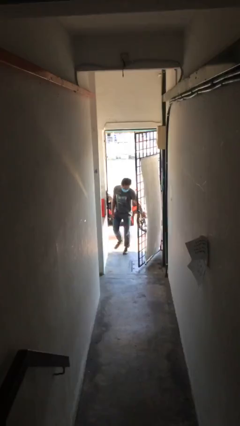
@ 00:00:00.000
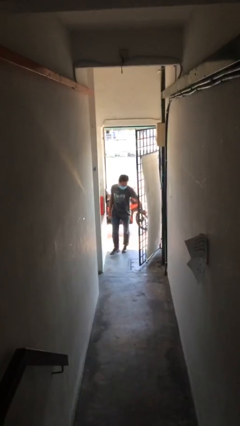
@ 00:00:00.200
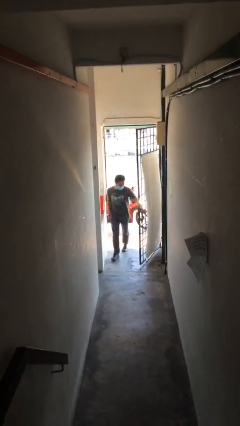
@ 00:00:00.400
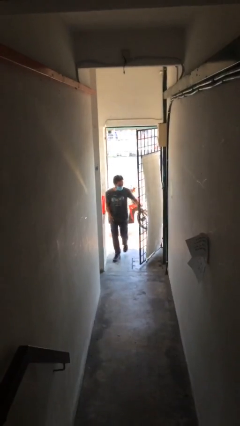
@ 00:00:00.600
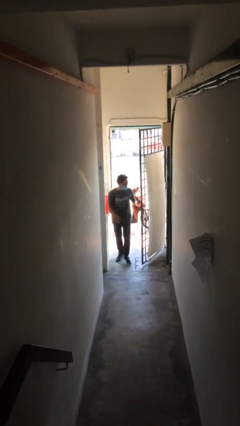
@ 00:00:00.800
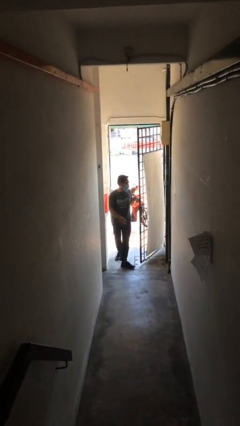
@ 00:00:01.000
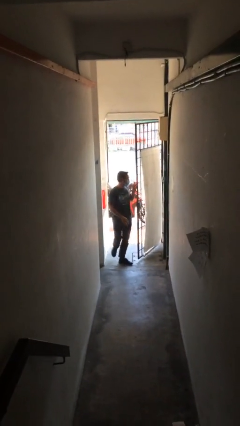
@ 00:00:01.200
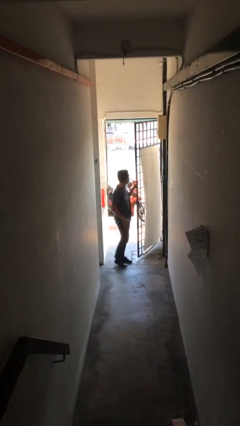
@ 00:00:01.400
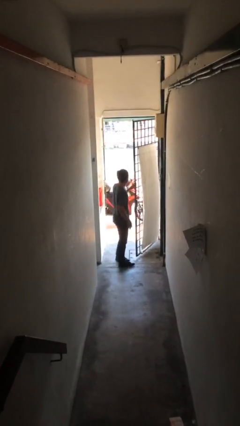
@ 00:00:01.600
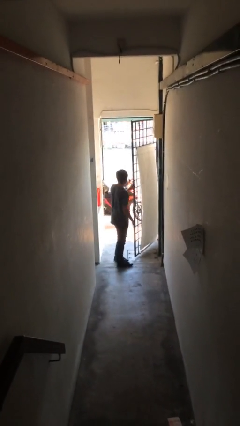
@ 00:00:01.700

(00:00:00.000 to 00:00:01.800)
person enters scene through structure

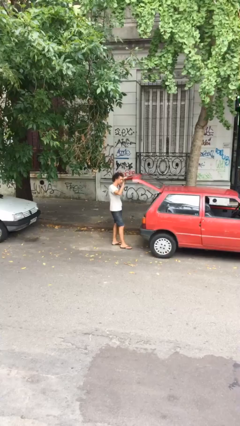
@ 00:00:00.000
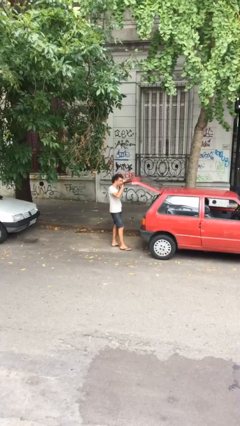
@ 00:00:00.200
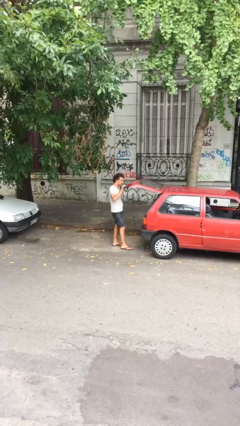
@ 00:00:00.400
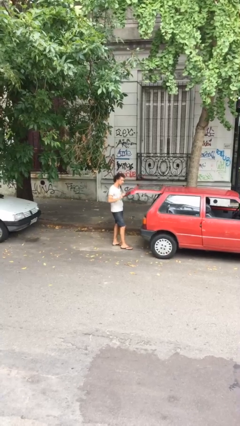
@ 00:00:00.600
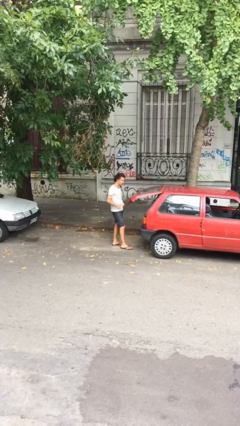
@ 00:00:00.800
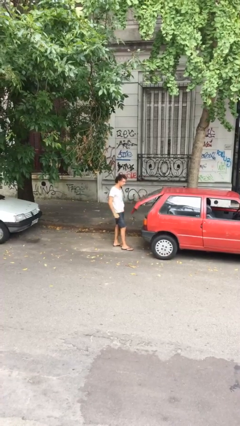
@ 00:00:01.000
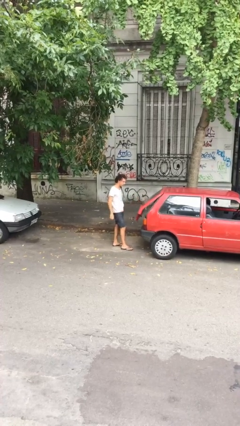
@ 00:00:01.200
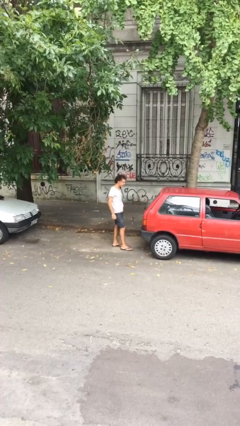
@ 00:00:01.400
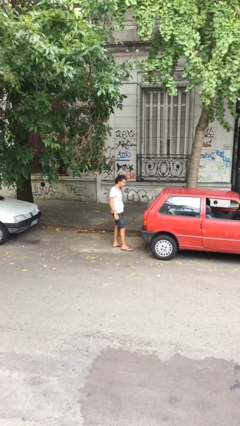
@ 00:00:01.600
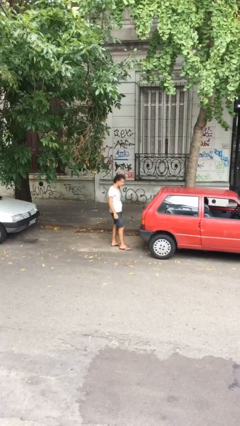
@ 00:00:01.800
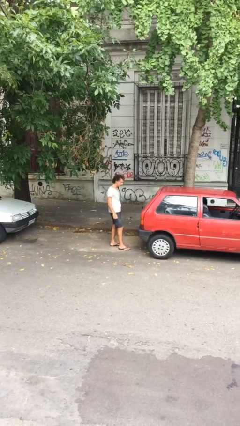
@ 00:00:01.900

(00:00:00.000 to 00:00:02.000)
person closes car trunk

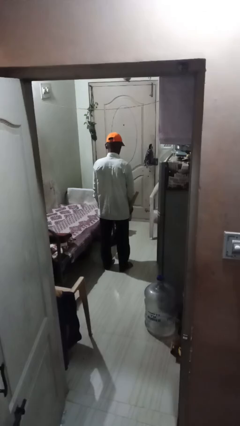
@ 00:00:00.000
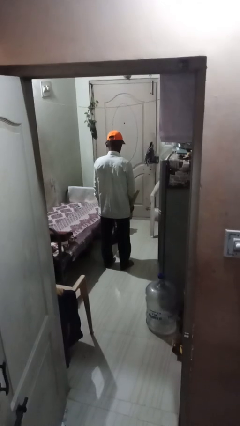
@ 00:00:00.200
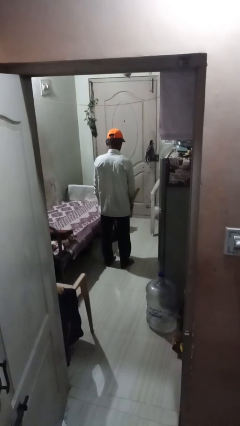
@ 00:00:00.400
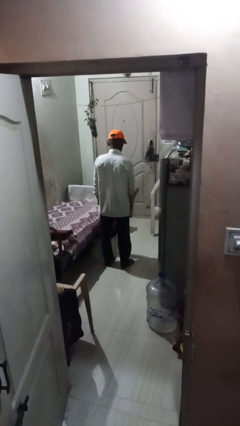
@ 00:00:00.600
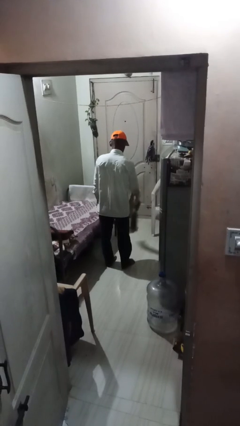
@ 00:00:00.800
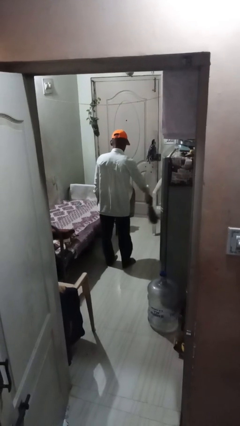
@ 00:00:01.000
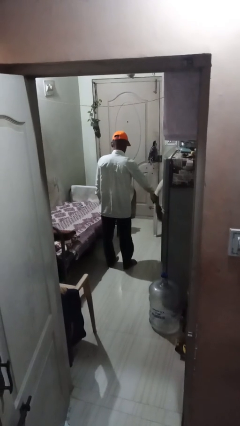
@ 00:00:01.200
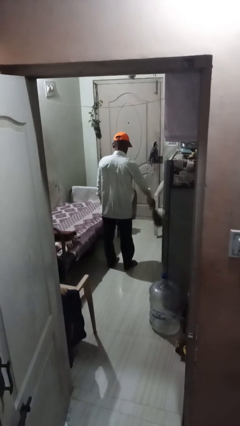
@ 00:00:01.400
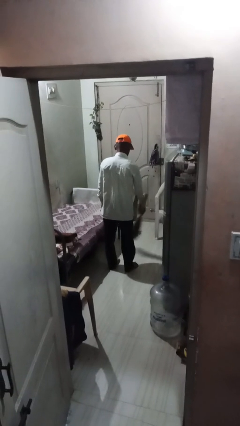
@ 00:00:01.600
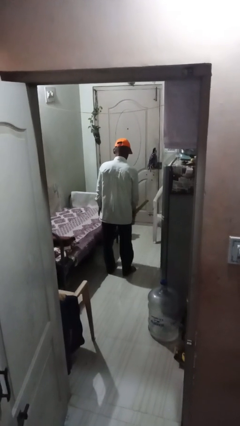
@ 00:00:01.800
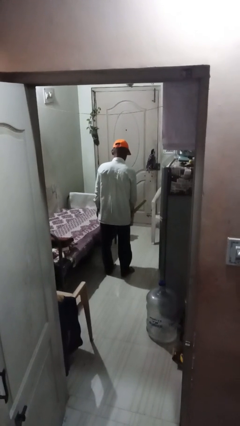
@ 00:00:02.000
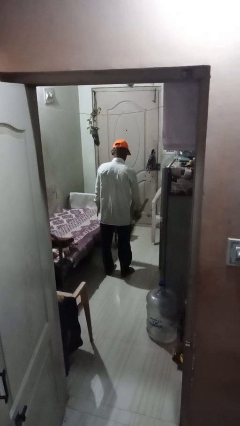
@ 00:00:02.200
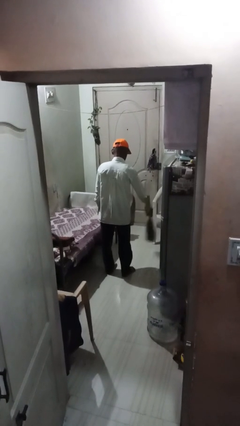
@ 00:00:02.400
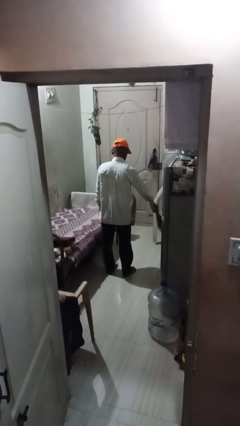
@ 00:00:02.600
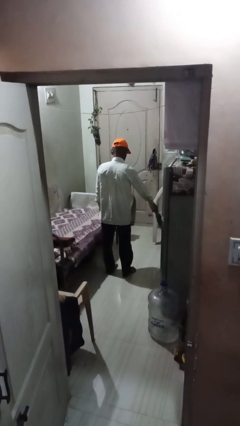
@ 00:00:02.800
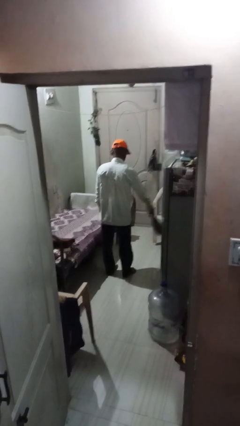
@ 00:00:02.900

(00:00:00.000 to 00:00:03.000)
person mops

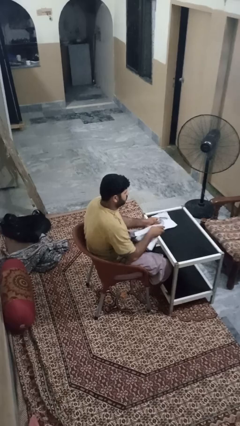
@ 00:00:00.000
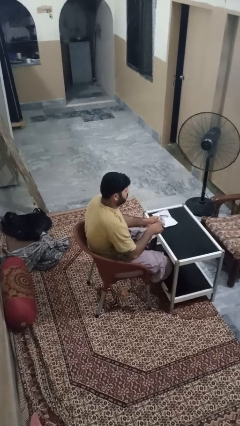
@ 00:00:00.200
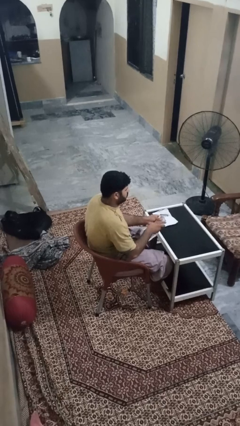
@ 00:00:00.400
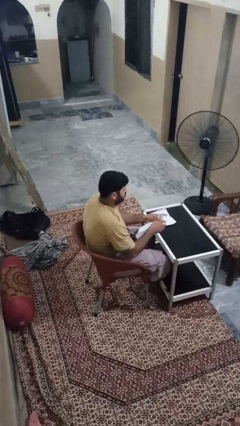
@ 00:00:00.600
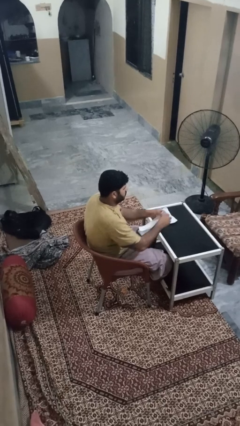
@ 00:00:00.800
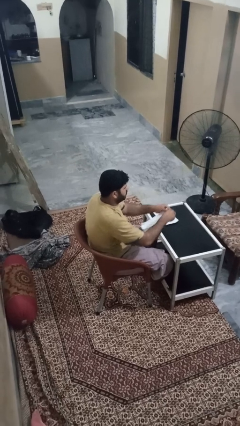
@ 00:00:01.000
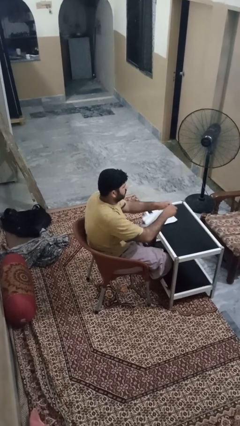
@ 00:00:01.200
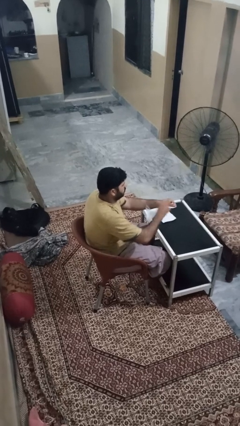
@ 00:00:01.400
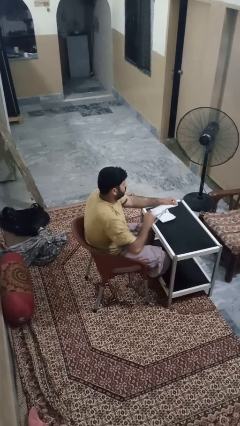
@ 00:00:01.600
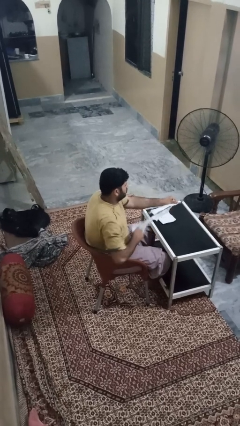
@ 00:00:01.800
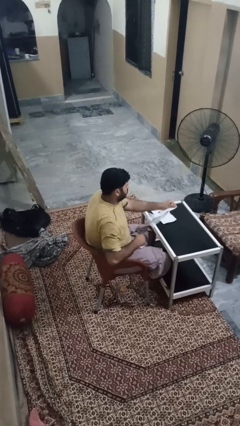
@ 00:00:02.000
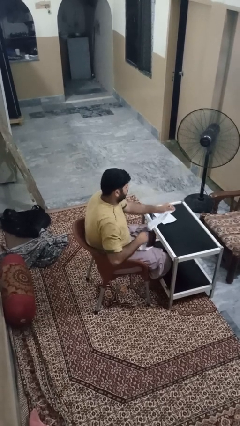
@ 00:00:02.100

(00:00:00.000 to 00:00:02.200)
person tears paper

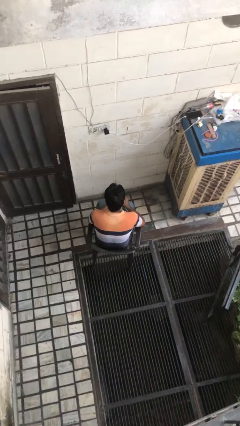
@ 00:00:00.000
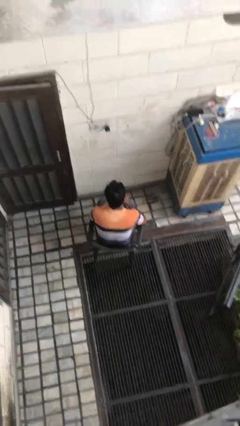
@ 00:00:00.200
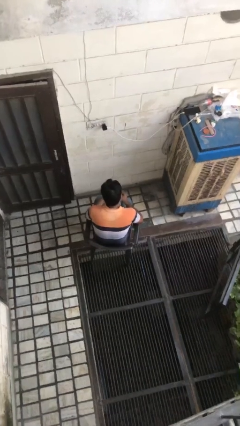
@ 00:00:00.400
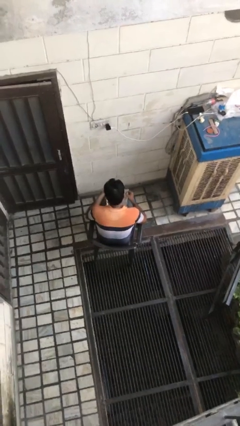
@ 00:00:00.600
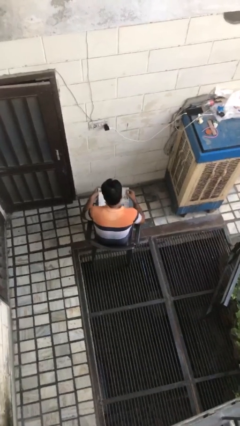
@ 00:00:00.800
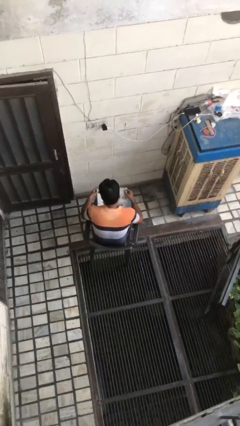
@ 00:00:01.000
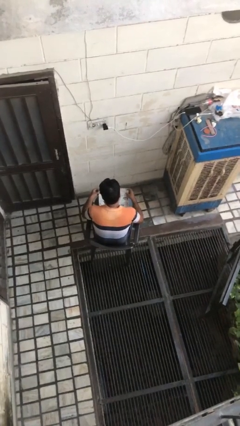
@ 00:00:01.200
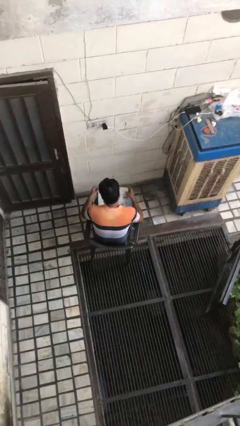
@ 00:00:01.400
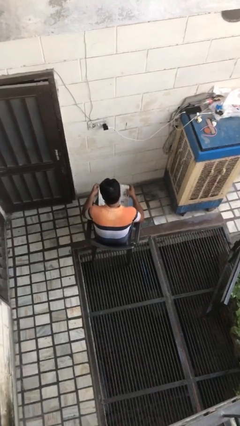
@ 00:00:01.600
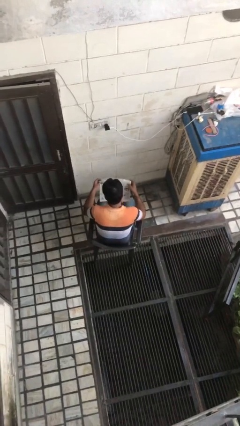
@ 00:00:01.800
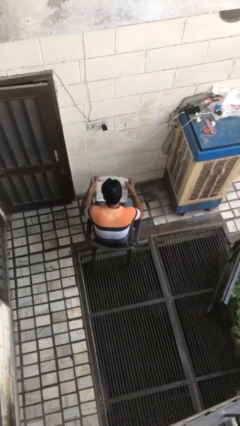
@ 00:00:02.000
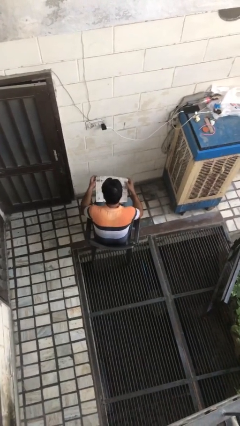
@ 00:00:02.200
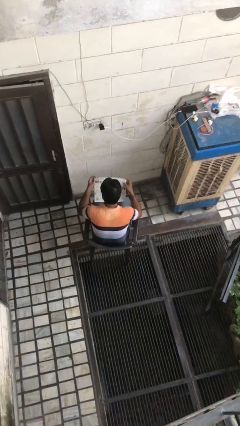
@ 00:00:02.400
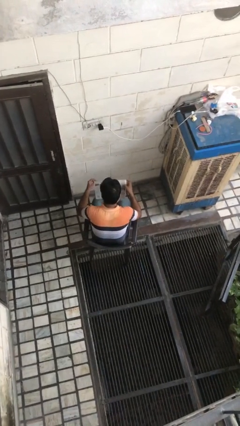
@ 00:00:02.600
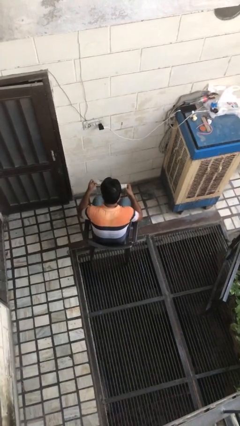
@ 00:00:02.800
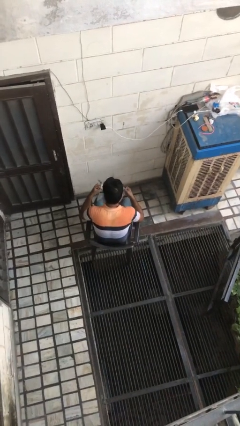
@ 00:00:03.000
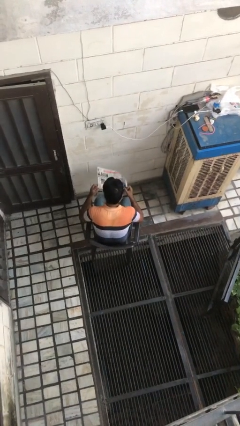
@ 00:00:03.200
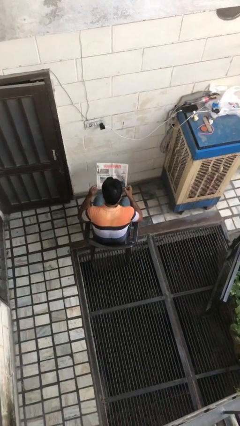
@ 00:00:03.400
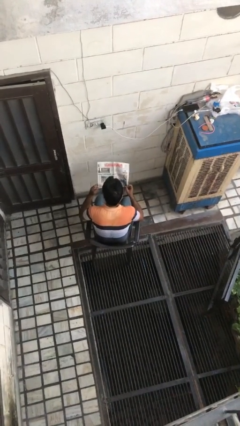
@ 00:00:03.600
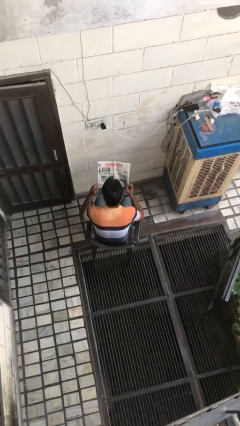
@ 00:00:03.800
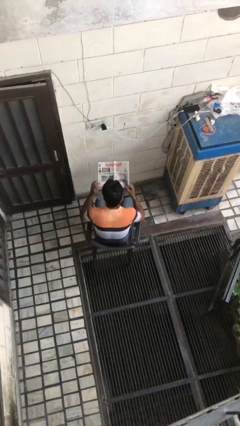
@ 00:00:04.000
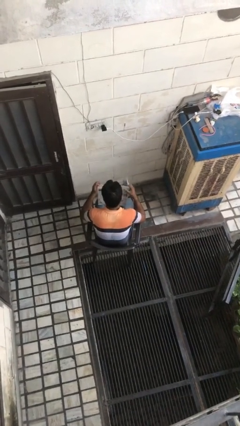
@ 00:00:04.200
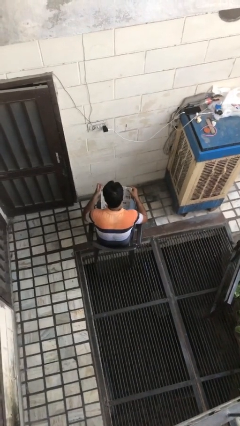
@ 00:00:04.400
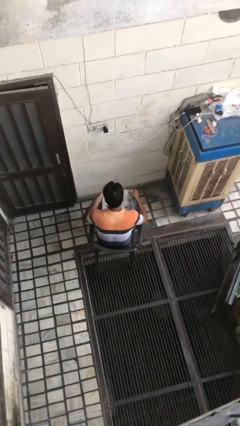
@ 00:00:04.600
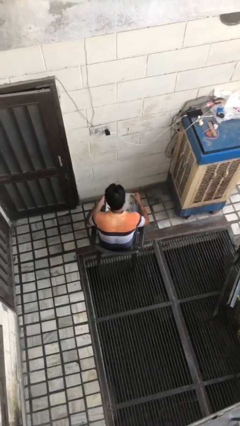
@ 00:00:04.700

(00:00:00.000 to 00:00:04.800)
person reads newspaper

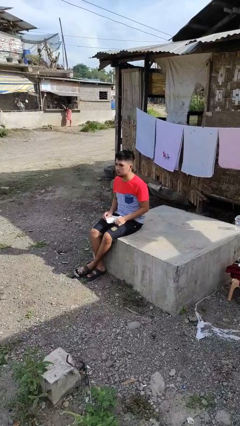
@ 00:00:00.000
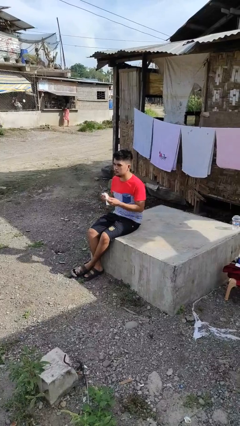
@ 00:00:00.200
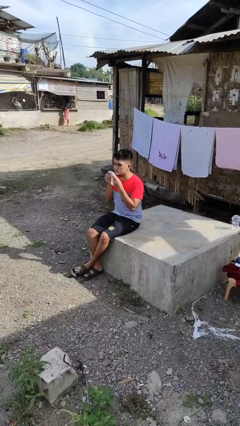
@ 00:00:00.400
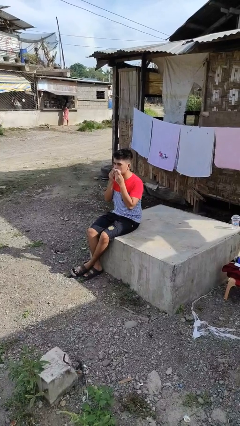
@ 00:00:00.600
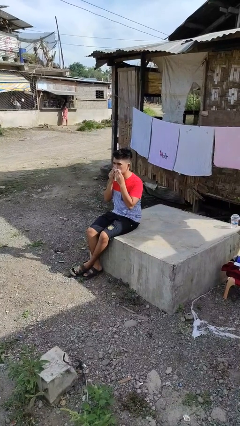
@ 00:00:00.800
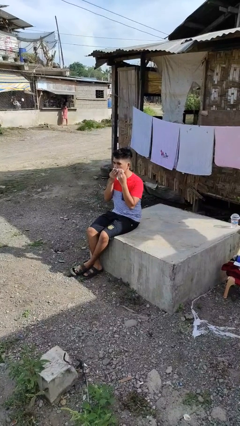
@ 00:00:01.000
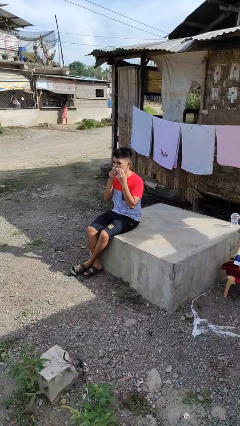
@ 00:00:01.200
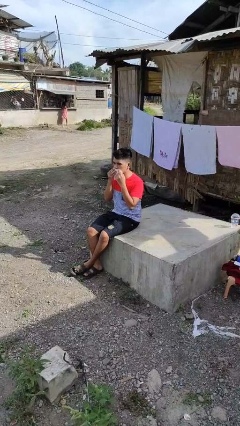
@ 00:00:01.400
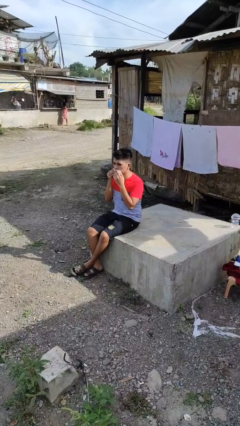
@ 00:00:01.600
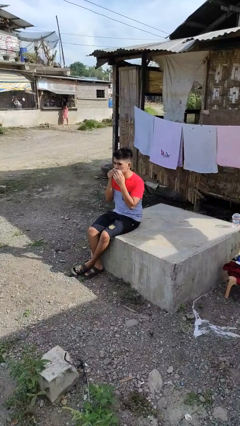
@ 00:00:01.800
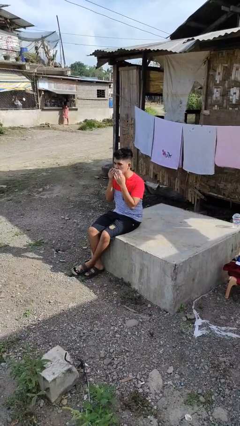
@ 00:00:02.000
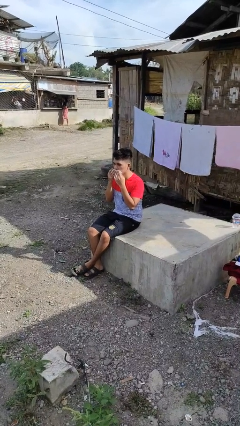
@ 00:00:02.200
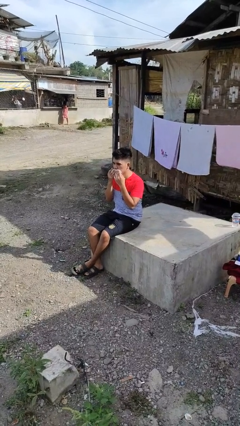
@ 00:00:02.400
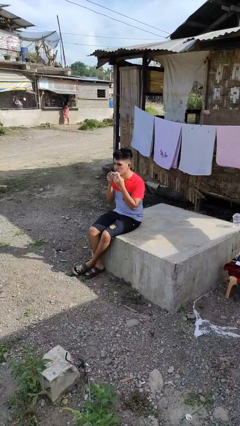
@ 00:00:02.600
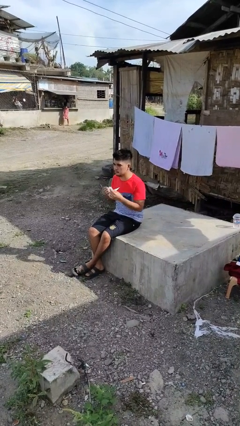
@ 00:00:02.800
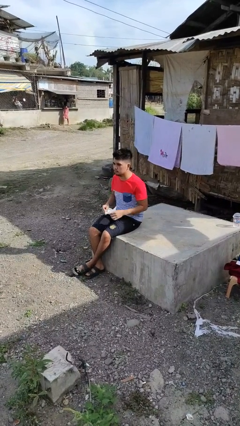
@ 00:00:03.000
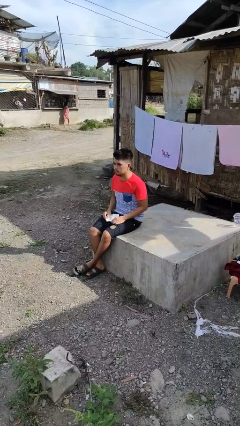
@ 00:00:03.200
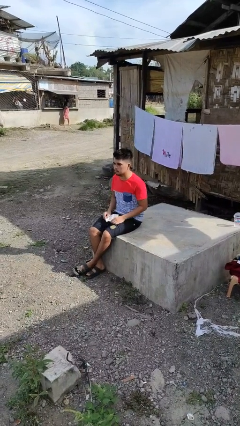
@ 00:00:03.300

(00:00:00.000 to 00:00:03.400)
person wipes mouth with napkin
